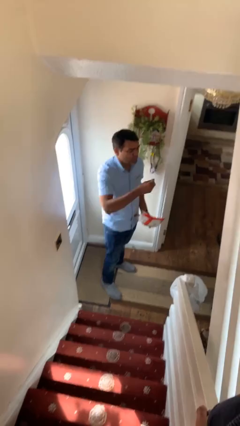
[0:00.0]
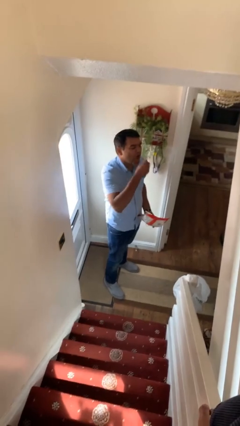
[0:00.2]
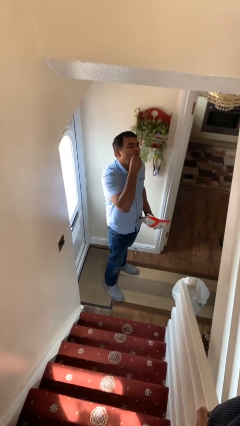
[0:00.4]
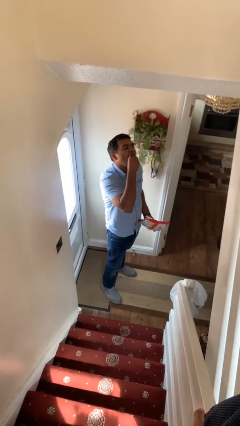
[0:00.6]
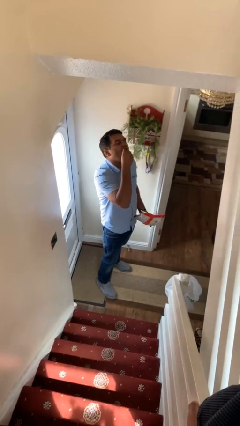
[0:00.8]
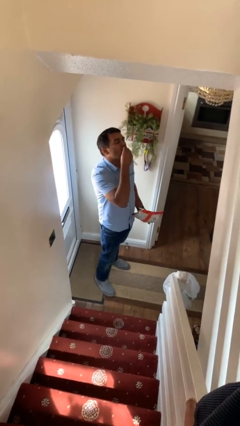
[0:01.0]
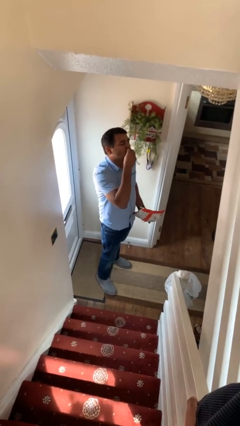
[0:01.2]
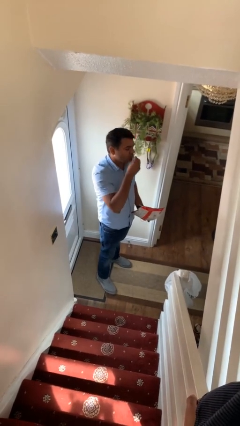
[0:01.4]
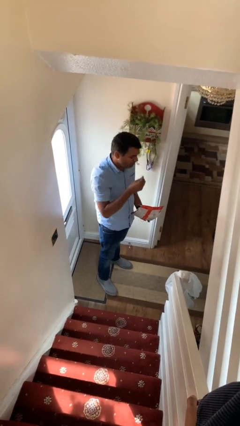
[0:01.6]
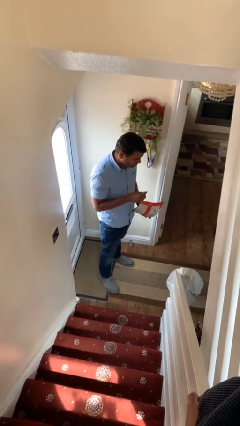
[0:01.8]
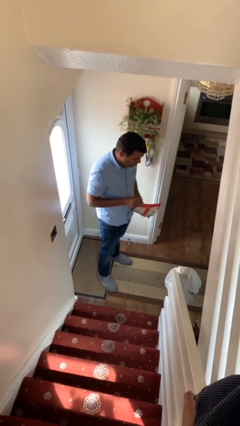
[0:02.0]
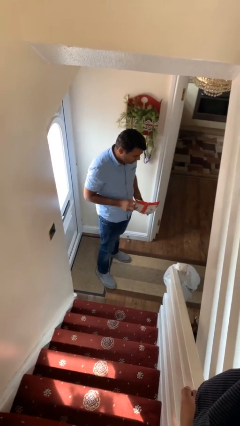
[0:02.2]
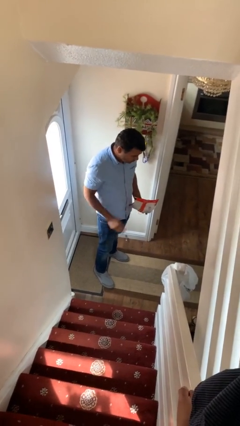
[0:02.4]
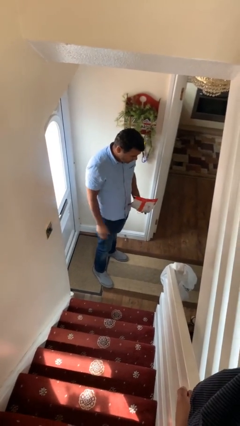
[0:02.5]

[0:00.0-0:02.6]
person eats snack from bag

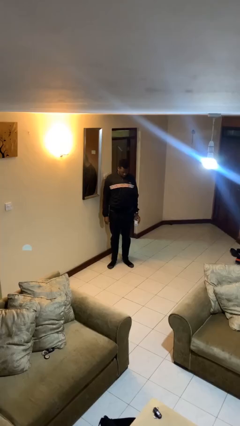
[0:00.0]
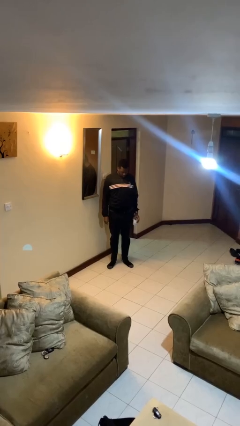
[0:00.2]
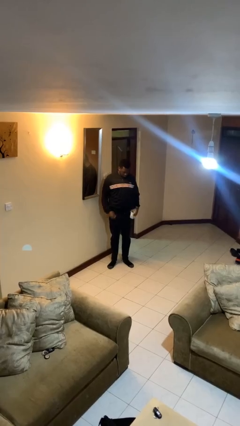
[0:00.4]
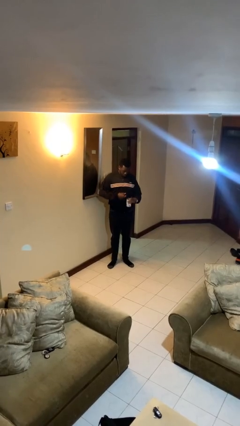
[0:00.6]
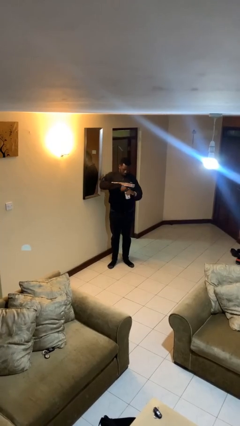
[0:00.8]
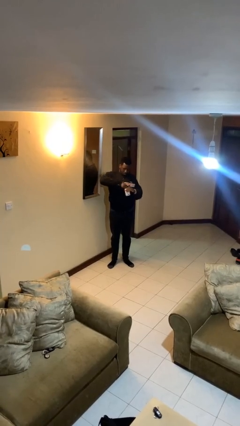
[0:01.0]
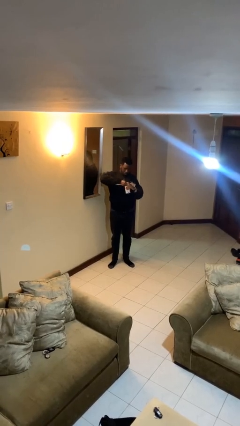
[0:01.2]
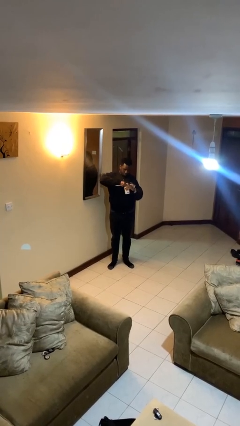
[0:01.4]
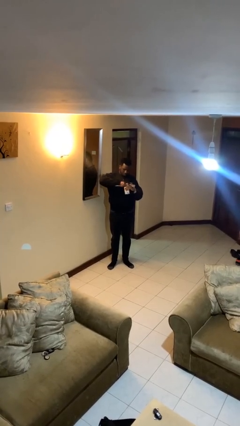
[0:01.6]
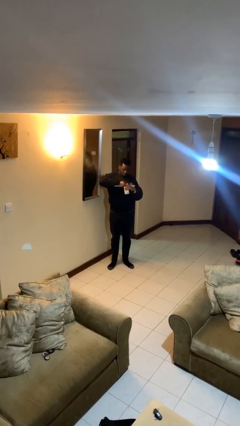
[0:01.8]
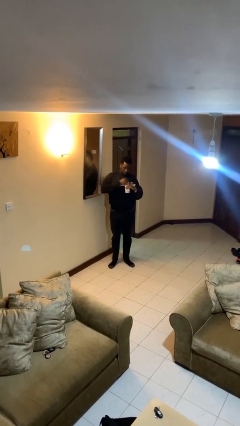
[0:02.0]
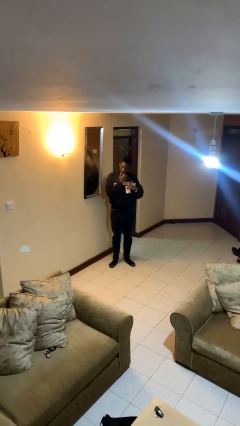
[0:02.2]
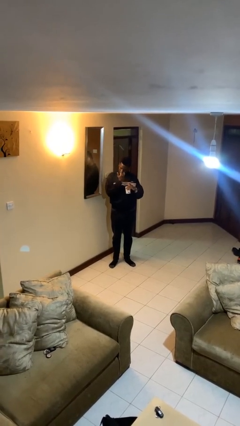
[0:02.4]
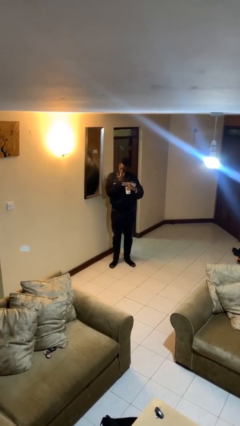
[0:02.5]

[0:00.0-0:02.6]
person opens beverage can

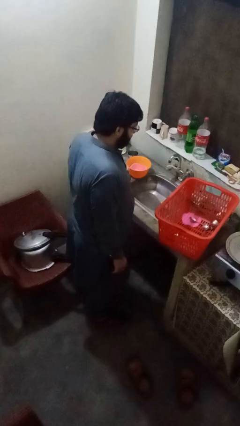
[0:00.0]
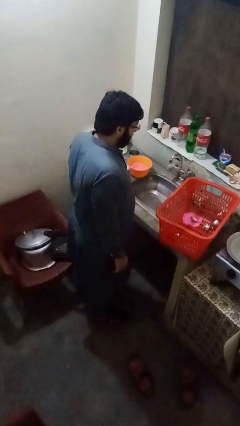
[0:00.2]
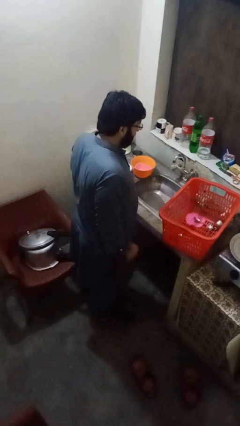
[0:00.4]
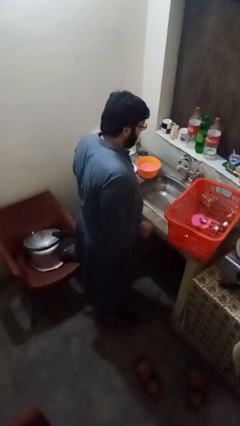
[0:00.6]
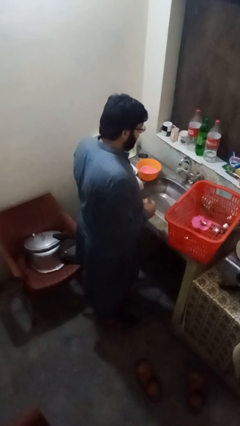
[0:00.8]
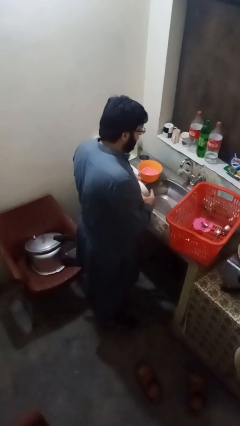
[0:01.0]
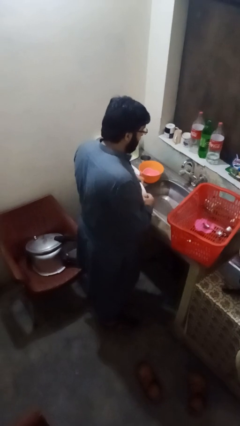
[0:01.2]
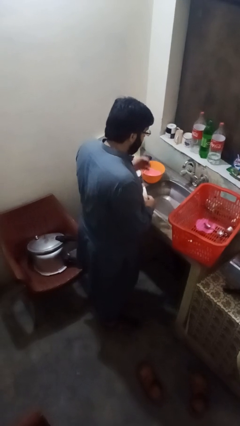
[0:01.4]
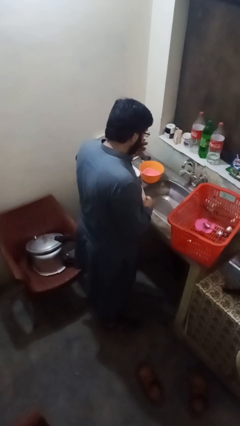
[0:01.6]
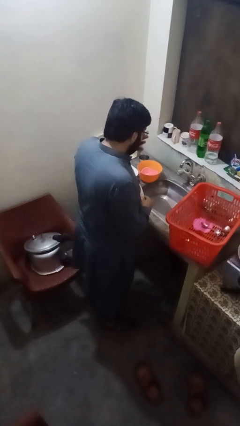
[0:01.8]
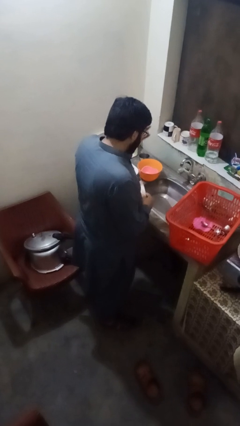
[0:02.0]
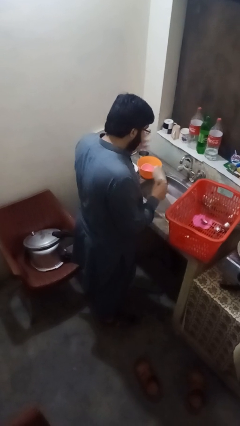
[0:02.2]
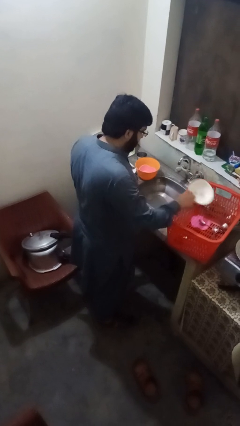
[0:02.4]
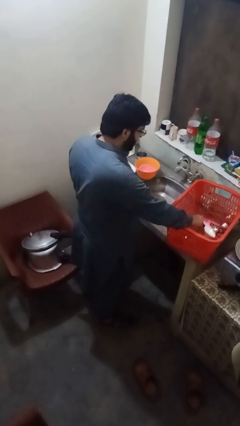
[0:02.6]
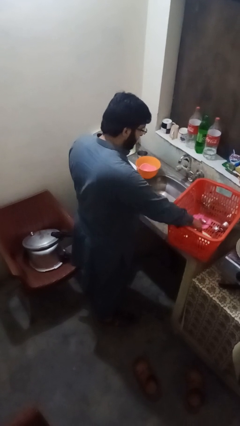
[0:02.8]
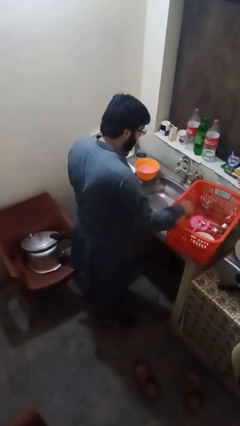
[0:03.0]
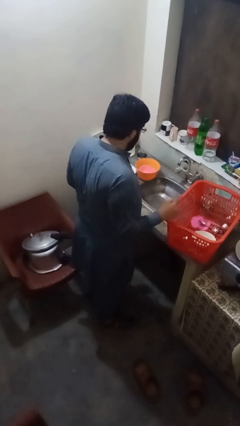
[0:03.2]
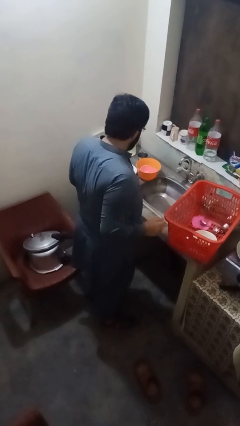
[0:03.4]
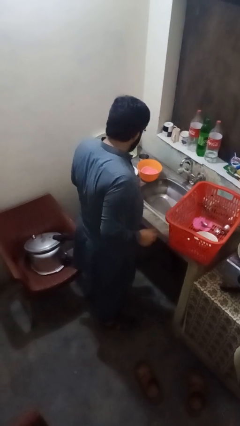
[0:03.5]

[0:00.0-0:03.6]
person loads dishwasher

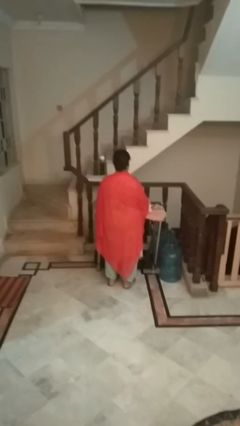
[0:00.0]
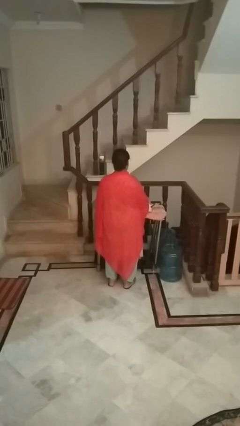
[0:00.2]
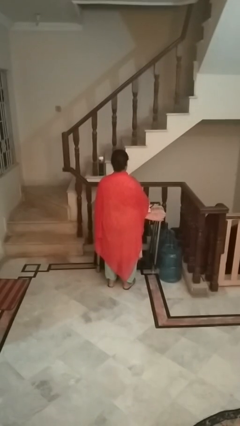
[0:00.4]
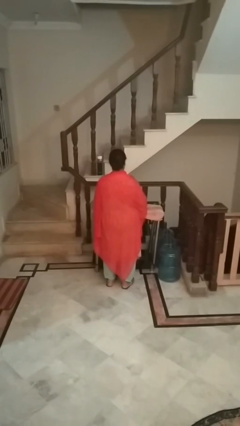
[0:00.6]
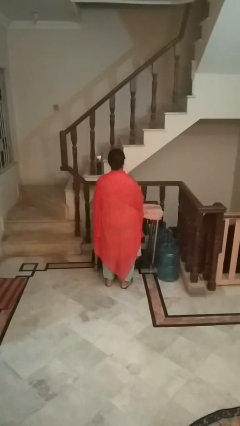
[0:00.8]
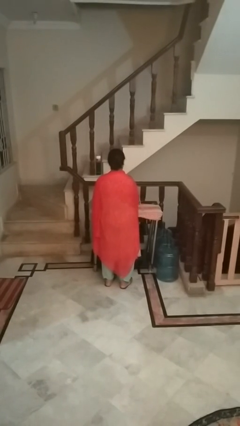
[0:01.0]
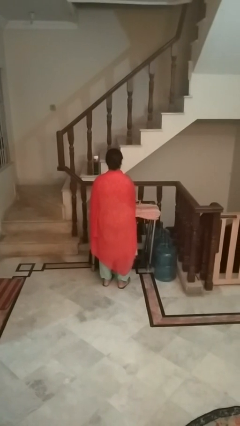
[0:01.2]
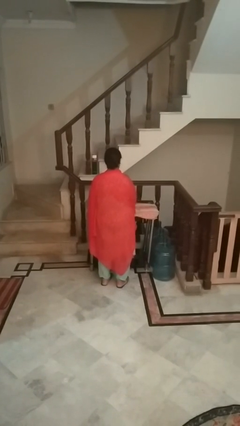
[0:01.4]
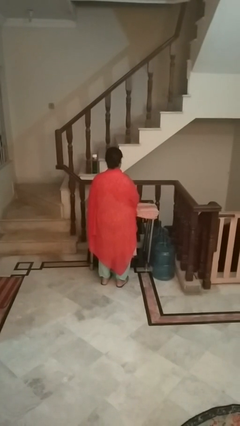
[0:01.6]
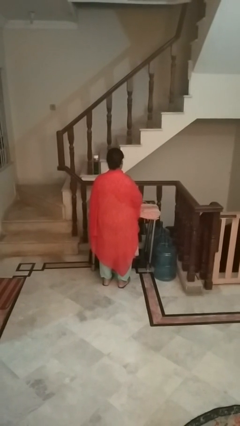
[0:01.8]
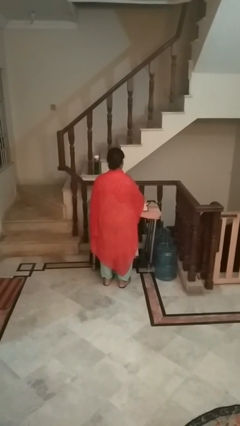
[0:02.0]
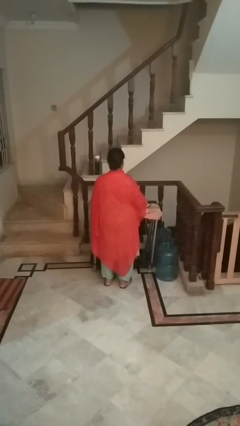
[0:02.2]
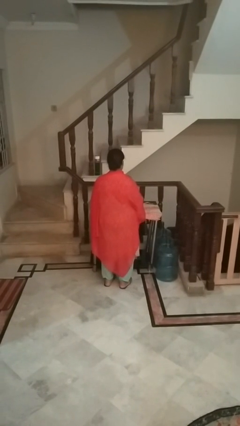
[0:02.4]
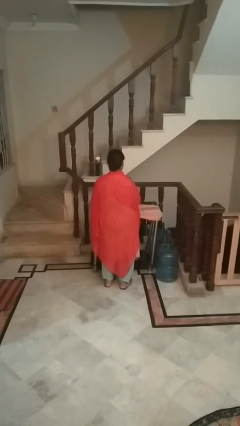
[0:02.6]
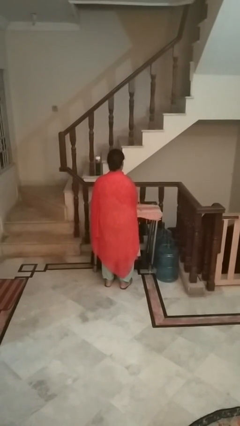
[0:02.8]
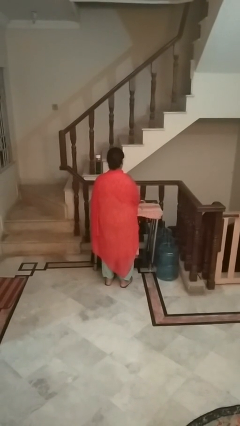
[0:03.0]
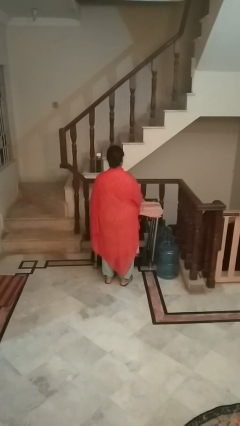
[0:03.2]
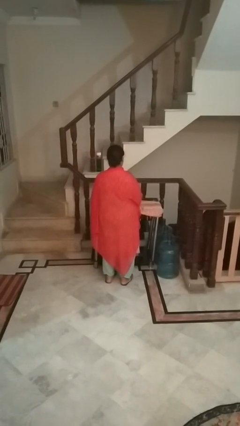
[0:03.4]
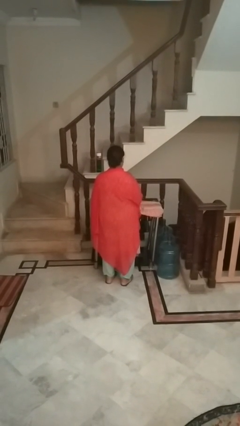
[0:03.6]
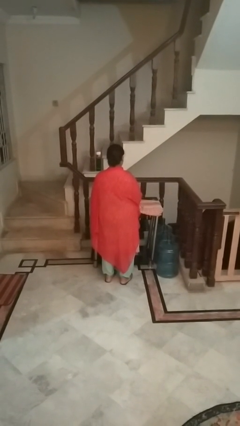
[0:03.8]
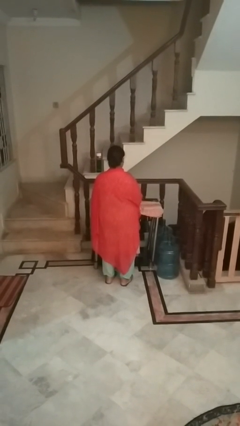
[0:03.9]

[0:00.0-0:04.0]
person irons clothes

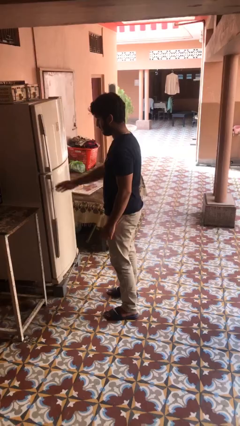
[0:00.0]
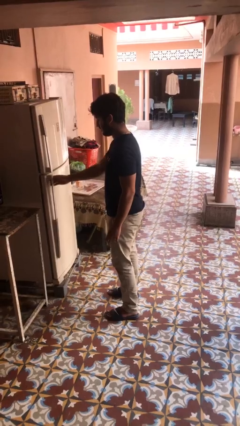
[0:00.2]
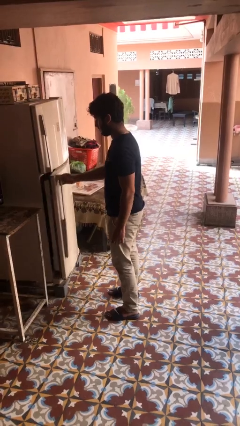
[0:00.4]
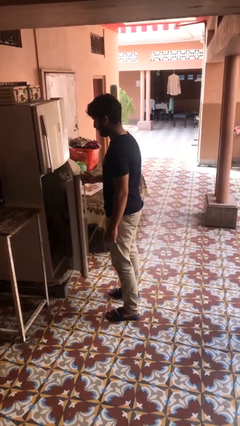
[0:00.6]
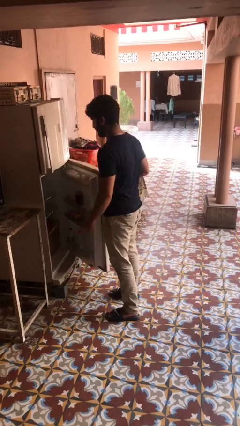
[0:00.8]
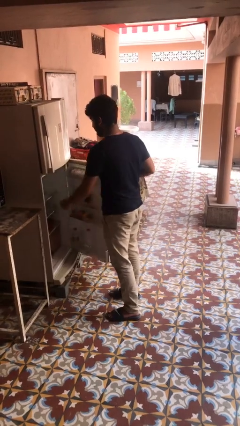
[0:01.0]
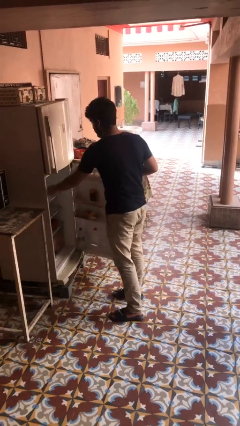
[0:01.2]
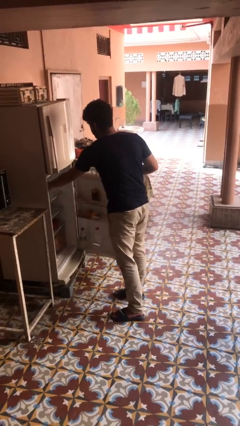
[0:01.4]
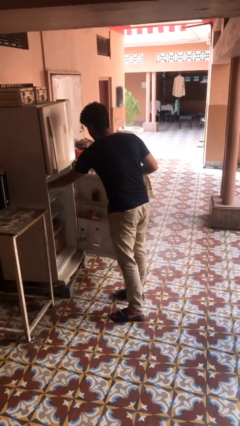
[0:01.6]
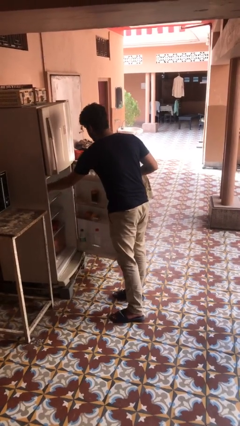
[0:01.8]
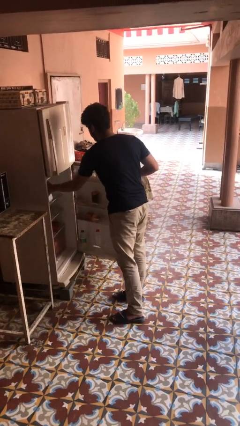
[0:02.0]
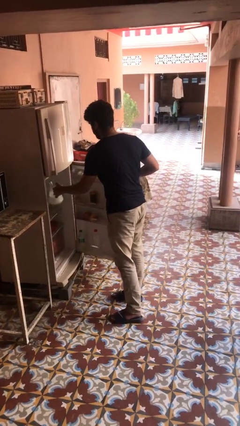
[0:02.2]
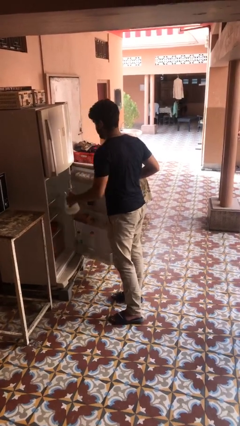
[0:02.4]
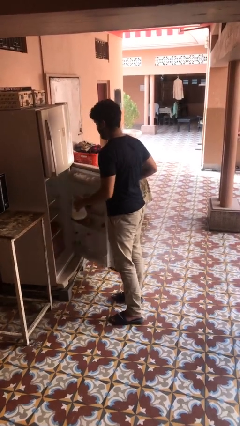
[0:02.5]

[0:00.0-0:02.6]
person takes object from refrigerator

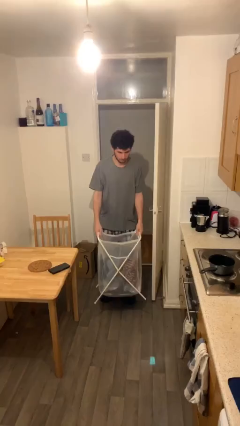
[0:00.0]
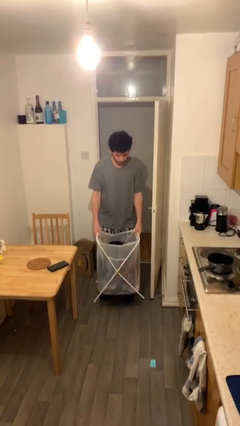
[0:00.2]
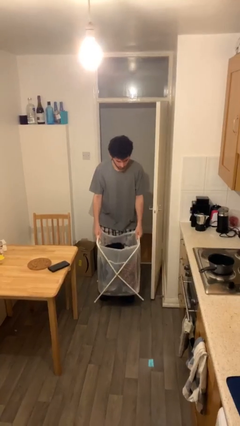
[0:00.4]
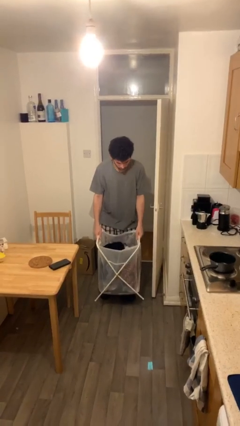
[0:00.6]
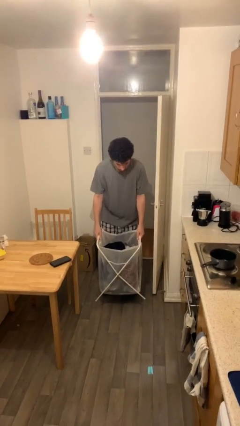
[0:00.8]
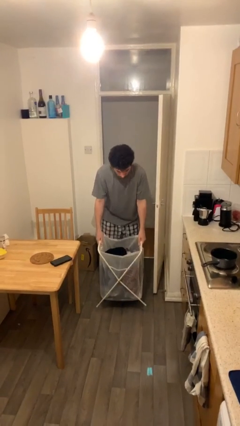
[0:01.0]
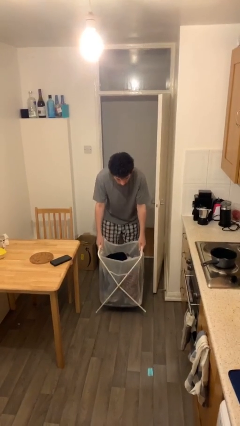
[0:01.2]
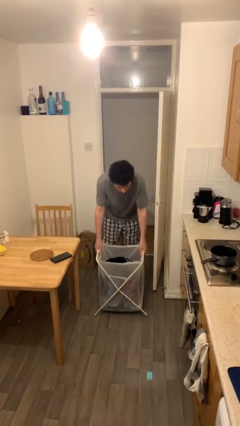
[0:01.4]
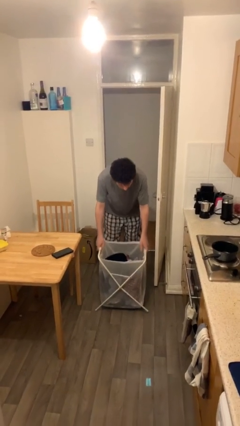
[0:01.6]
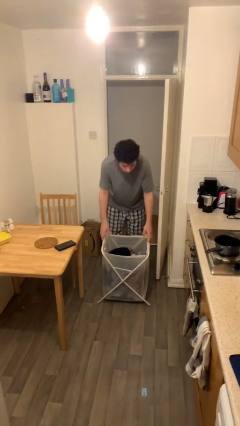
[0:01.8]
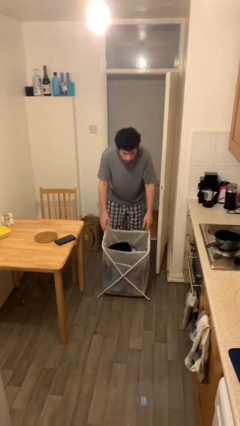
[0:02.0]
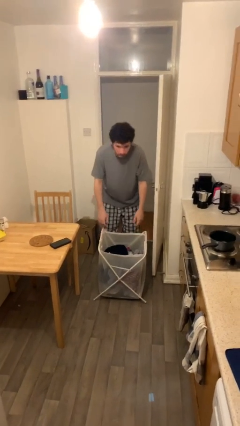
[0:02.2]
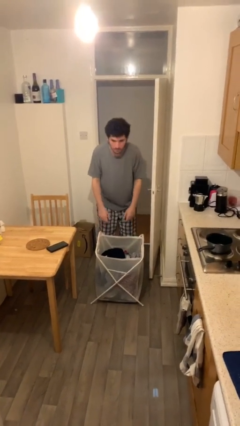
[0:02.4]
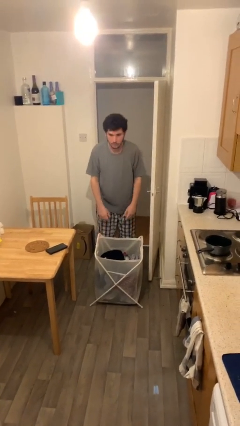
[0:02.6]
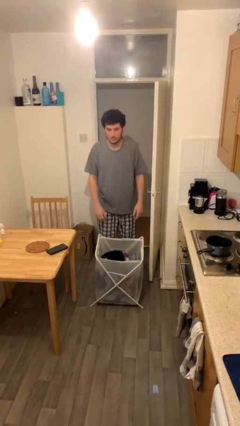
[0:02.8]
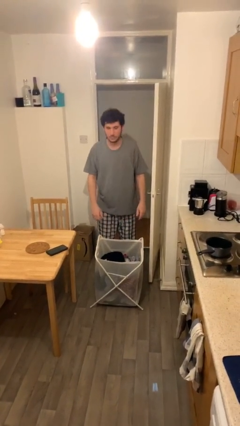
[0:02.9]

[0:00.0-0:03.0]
person puts down object on floor
